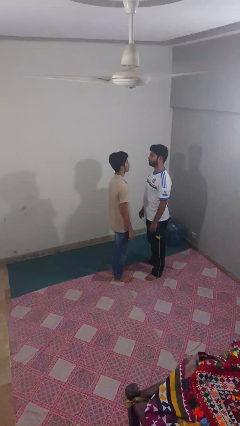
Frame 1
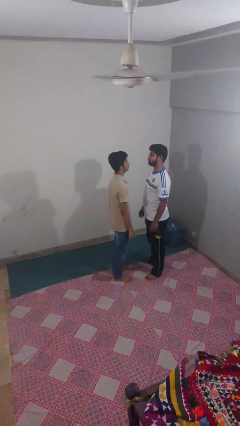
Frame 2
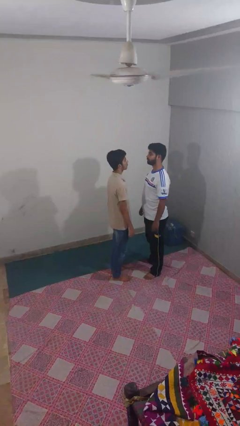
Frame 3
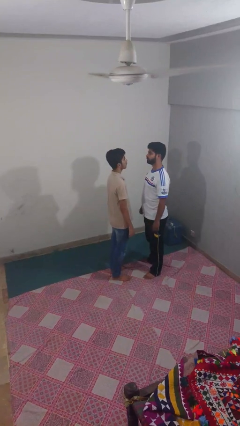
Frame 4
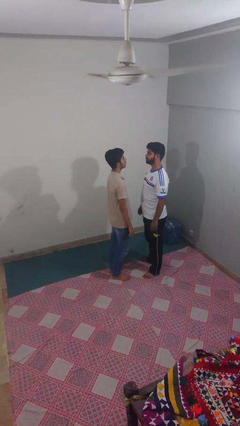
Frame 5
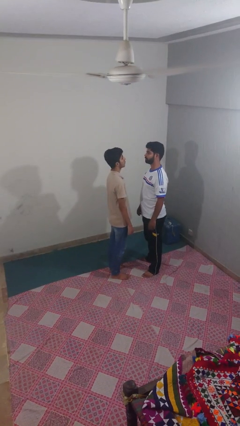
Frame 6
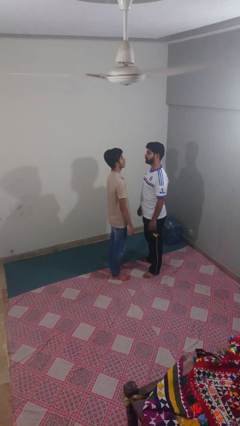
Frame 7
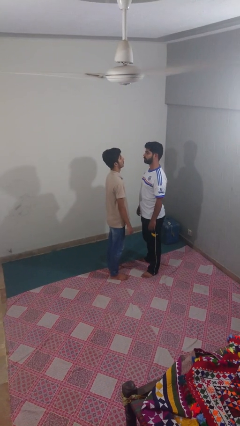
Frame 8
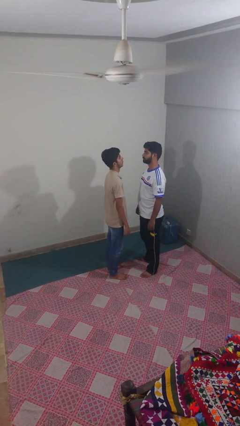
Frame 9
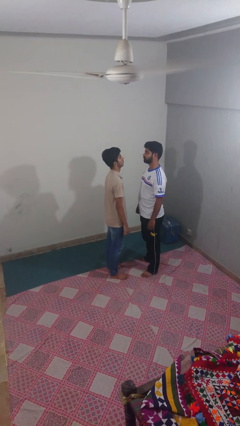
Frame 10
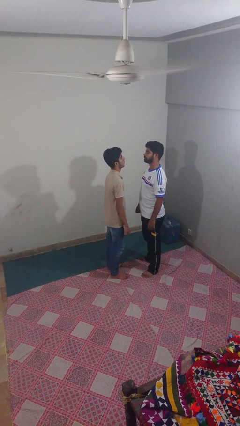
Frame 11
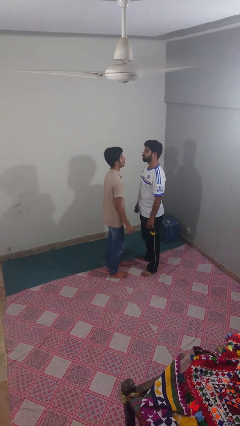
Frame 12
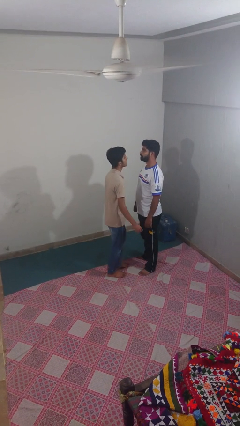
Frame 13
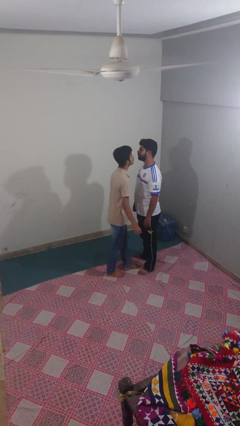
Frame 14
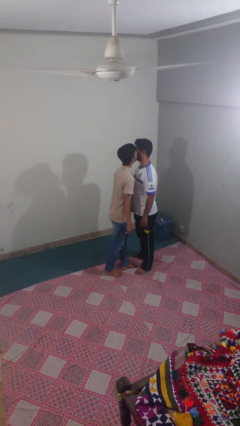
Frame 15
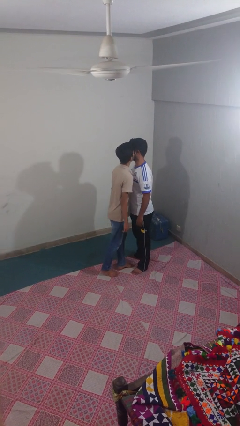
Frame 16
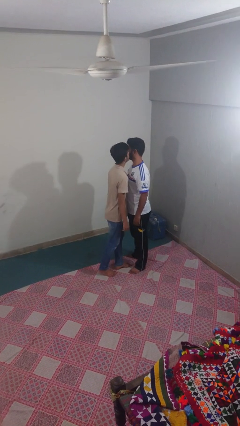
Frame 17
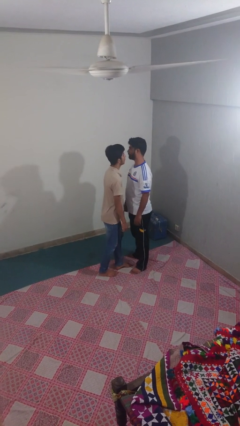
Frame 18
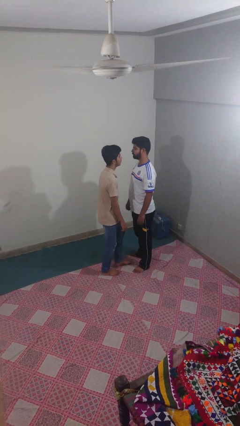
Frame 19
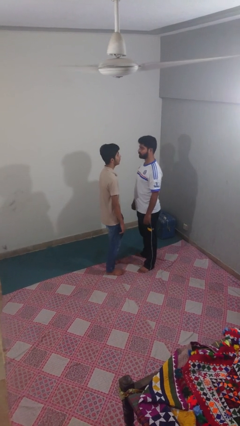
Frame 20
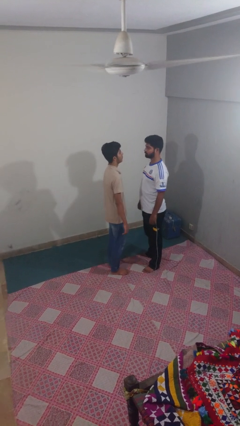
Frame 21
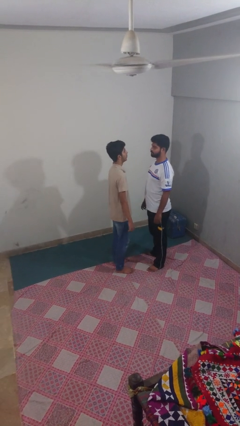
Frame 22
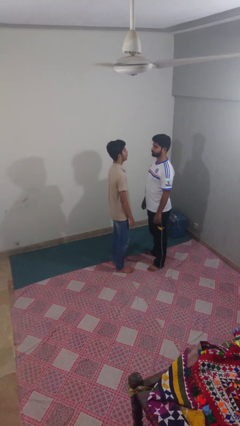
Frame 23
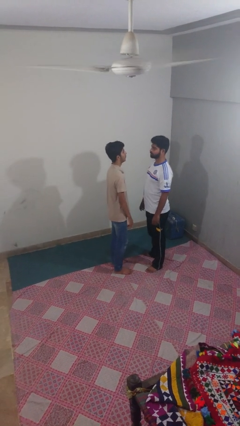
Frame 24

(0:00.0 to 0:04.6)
person kisses cheek of person

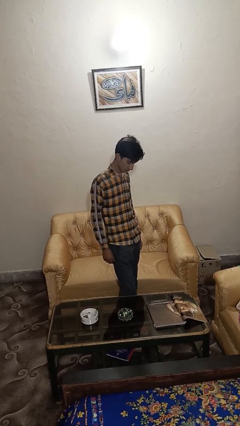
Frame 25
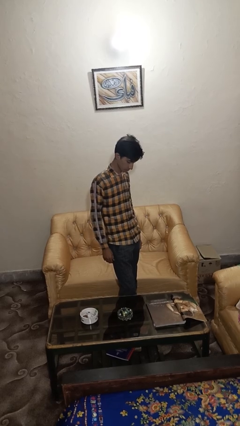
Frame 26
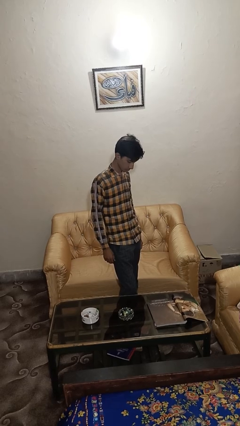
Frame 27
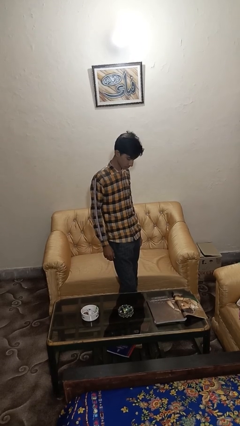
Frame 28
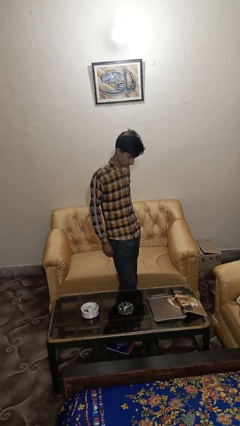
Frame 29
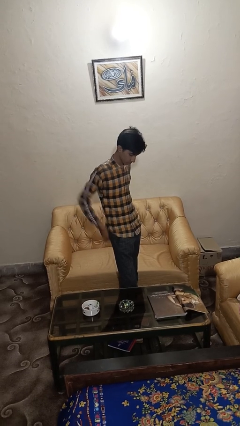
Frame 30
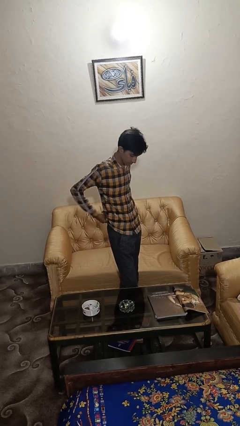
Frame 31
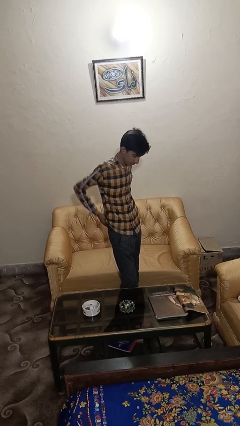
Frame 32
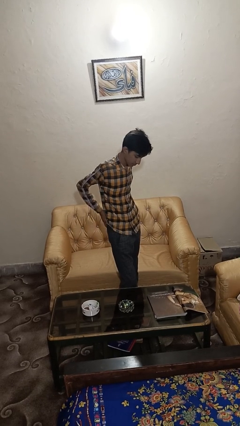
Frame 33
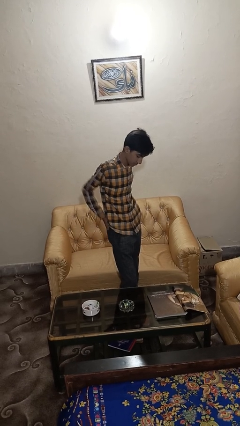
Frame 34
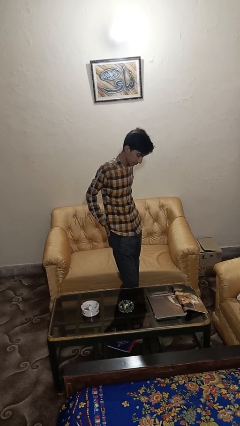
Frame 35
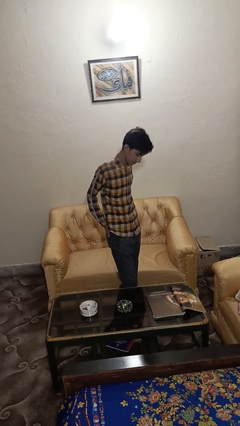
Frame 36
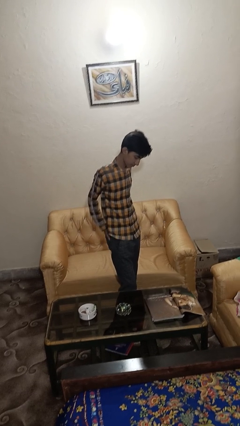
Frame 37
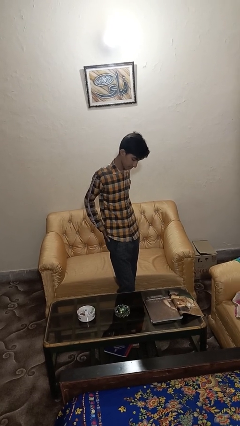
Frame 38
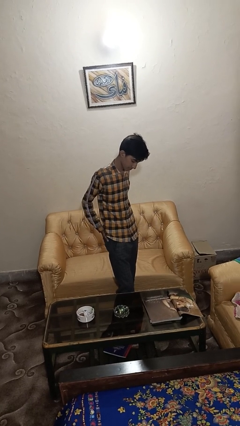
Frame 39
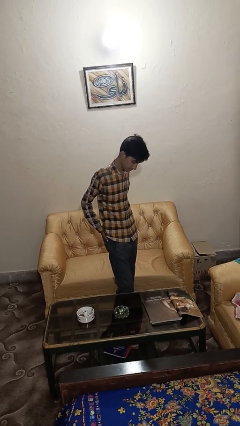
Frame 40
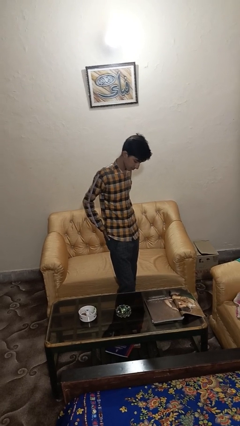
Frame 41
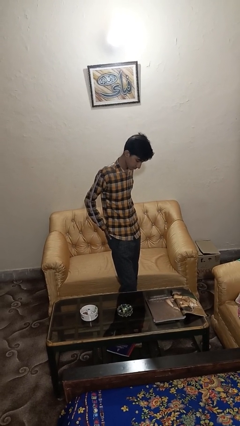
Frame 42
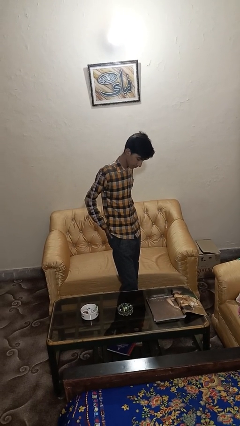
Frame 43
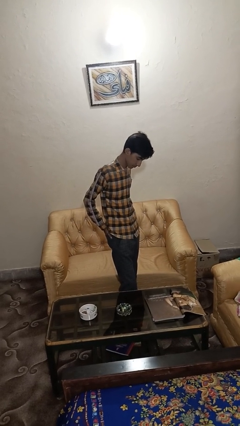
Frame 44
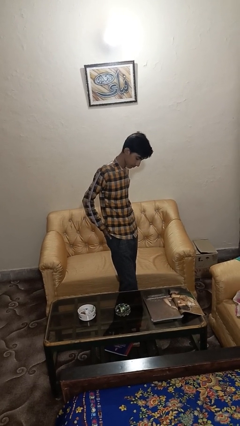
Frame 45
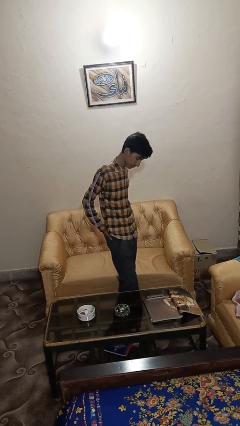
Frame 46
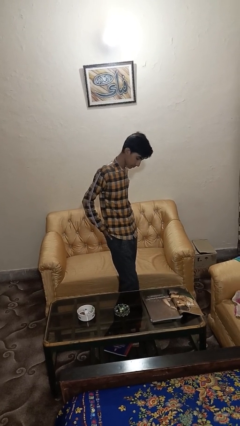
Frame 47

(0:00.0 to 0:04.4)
person puts hands in back pockets

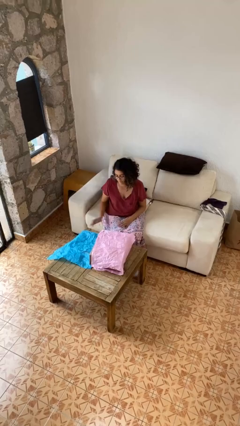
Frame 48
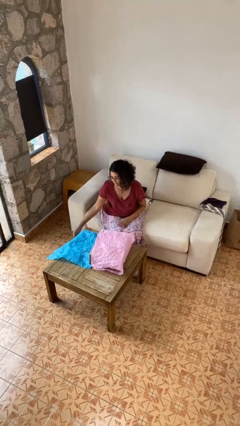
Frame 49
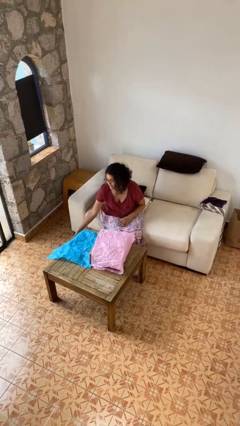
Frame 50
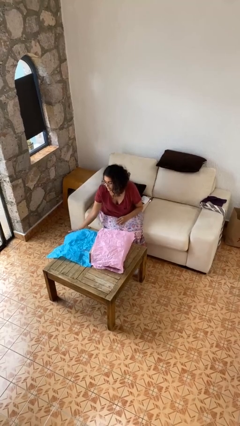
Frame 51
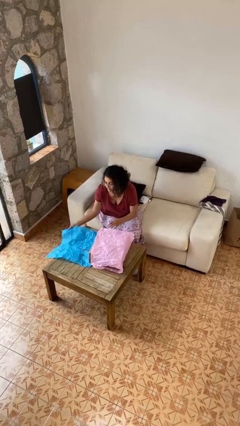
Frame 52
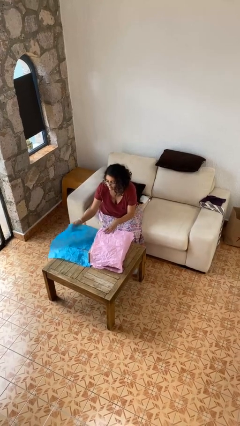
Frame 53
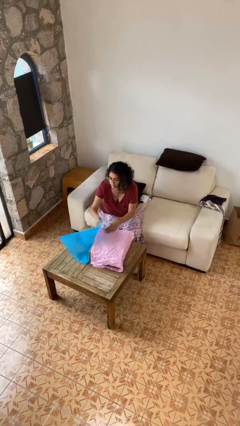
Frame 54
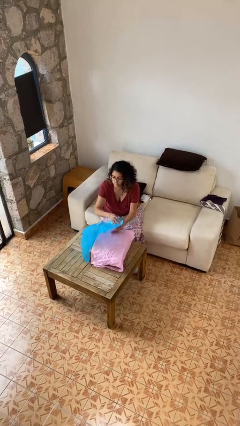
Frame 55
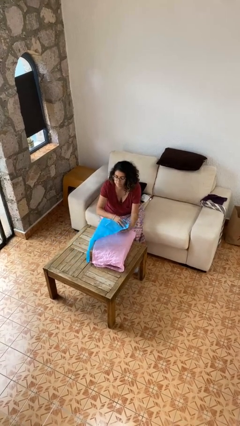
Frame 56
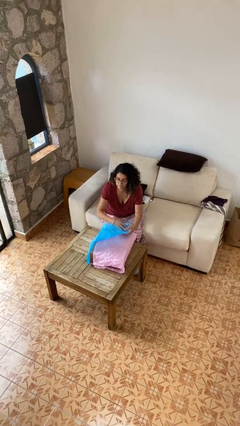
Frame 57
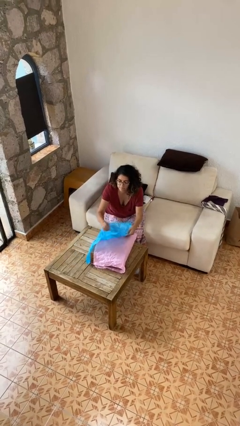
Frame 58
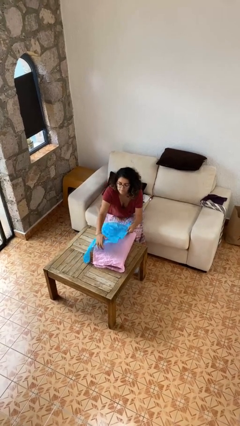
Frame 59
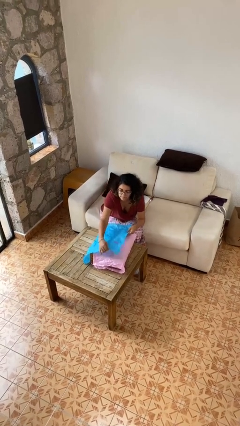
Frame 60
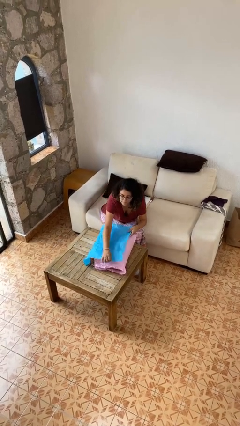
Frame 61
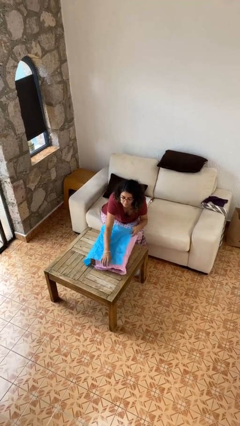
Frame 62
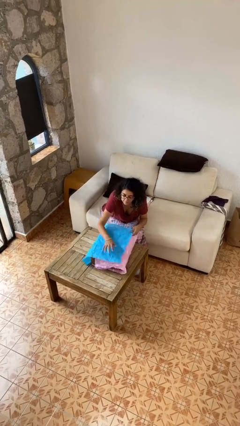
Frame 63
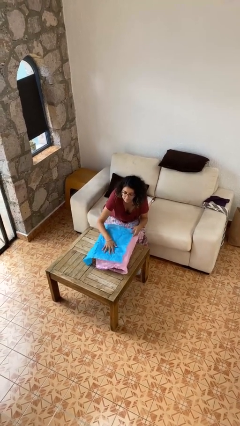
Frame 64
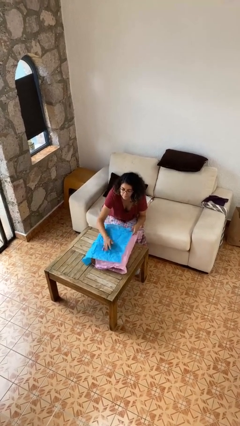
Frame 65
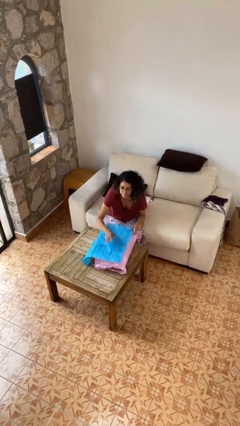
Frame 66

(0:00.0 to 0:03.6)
person wraps box

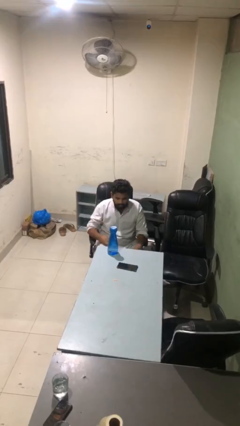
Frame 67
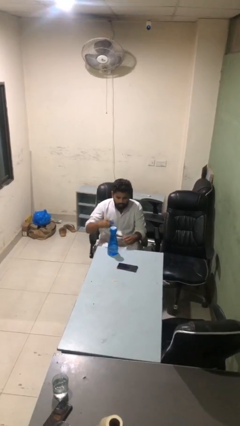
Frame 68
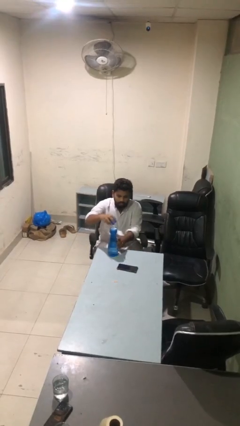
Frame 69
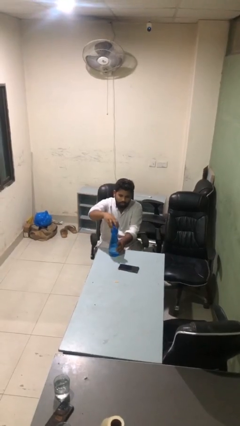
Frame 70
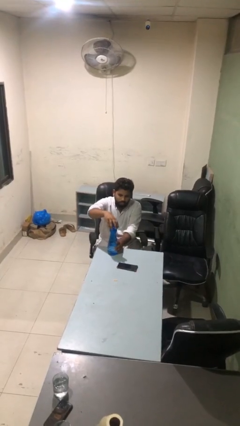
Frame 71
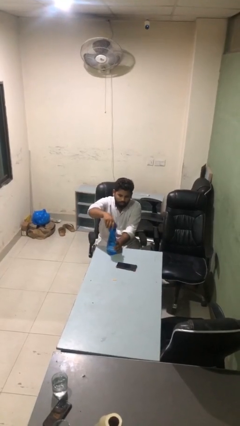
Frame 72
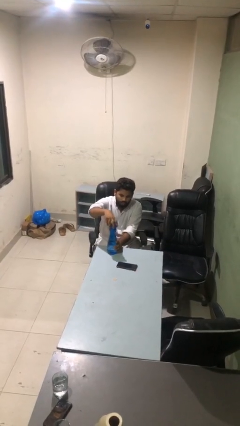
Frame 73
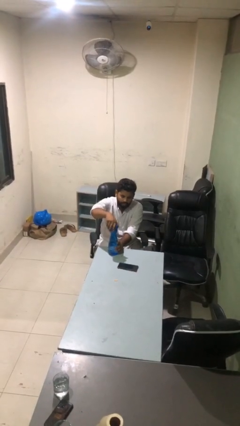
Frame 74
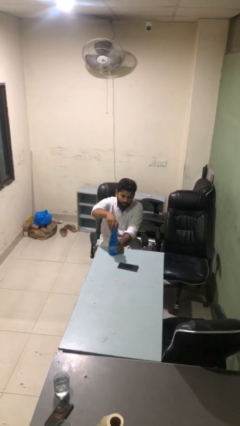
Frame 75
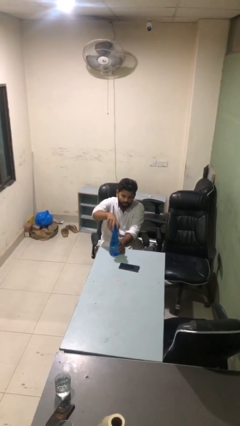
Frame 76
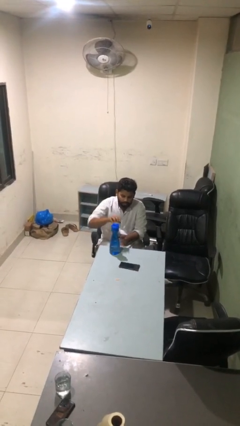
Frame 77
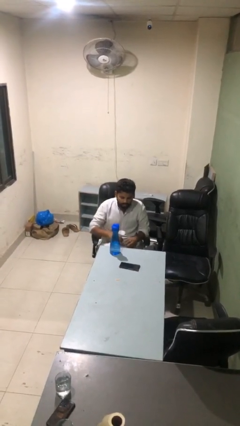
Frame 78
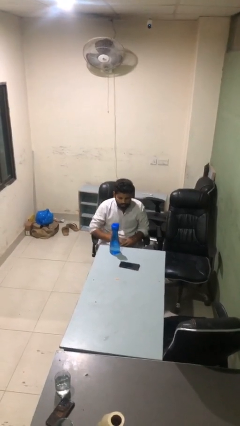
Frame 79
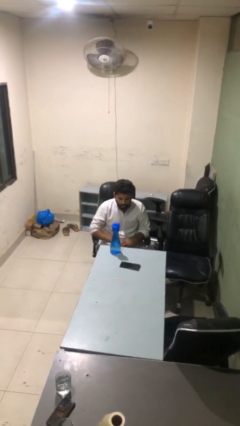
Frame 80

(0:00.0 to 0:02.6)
person screws lid to bottle

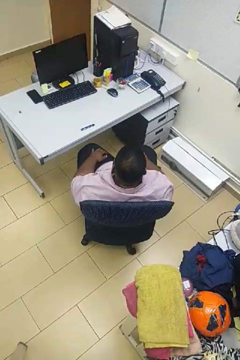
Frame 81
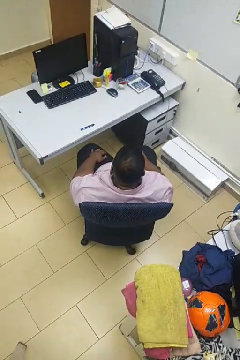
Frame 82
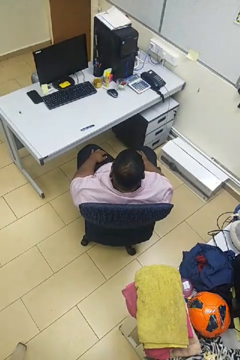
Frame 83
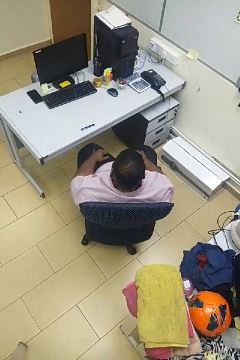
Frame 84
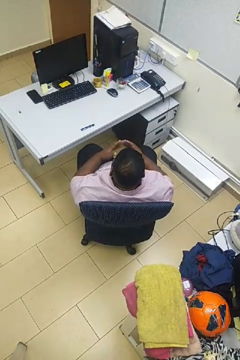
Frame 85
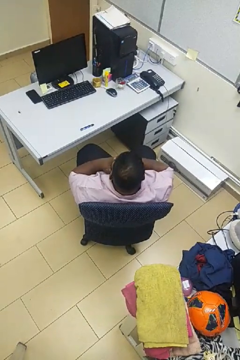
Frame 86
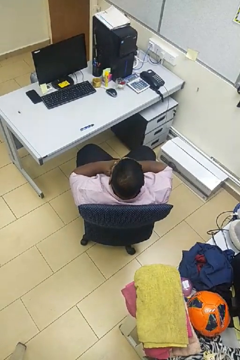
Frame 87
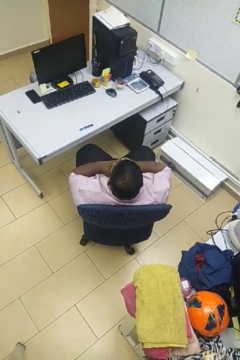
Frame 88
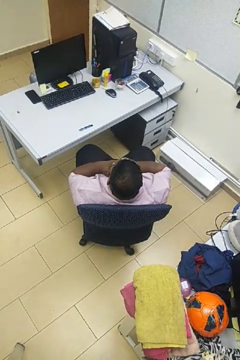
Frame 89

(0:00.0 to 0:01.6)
person covers face with hands

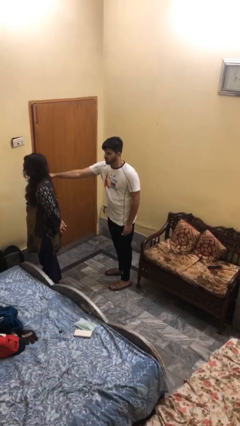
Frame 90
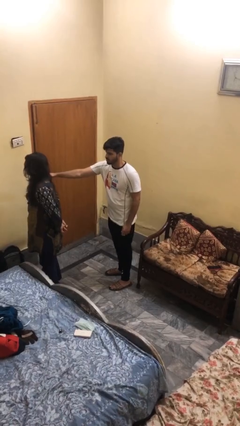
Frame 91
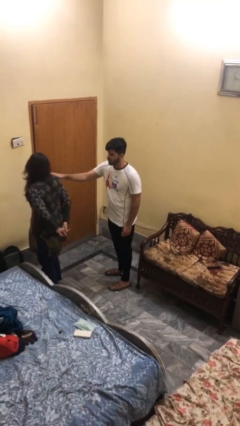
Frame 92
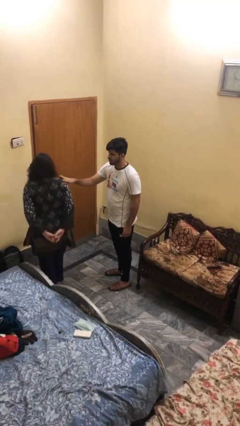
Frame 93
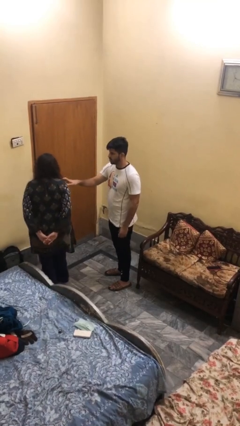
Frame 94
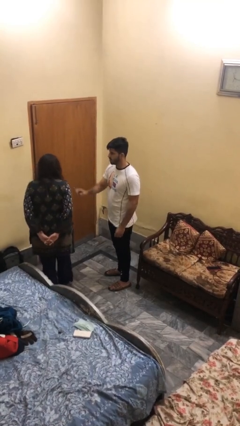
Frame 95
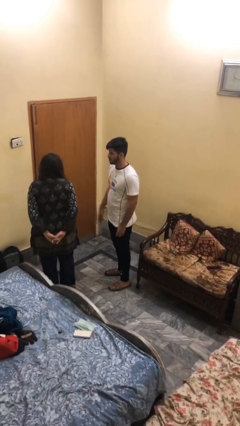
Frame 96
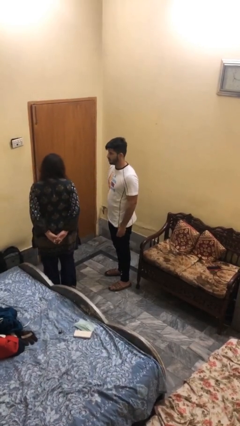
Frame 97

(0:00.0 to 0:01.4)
person spins person around
